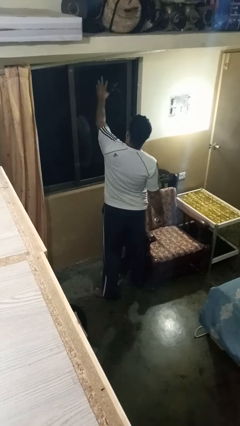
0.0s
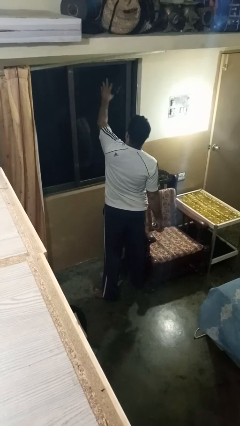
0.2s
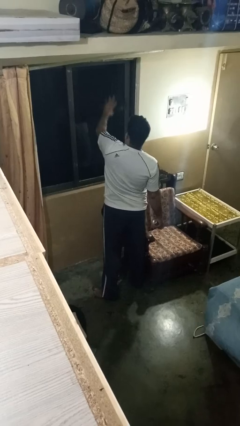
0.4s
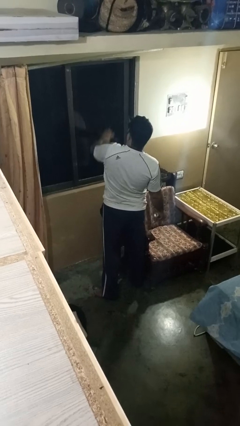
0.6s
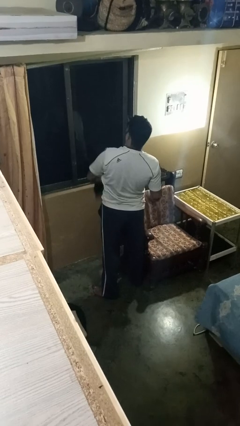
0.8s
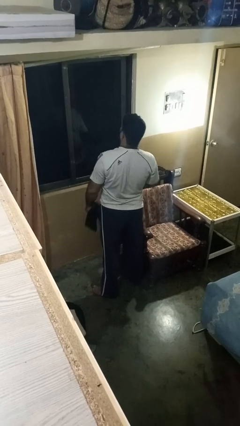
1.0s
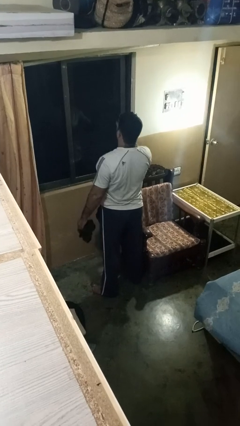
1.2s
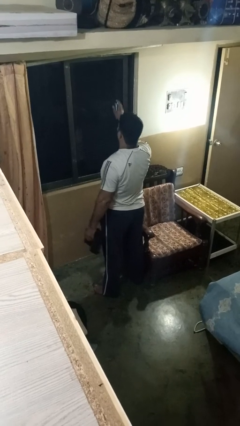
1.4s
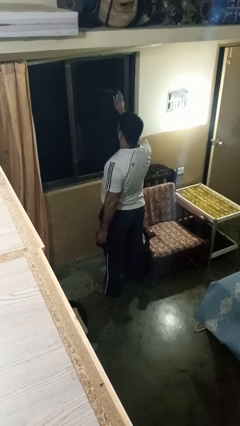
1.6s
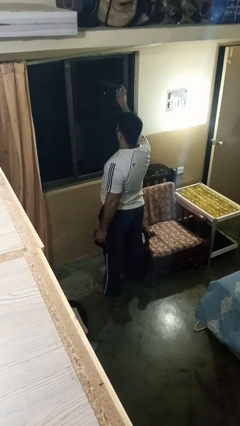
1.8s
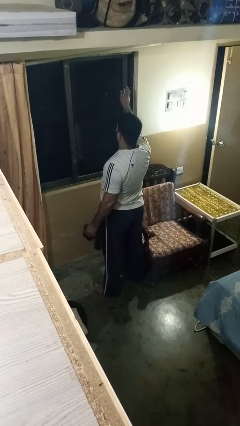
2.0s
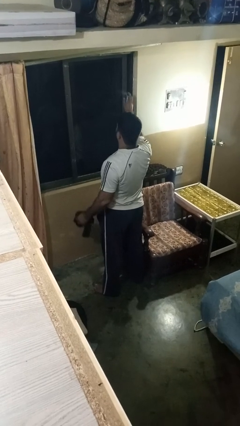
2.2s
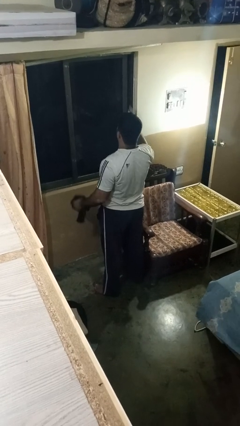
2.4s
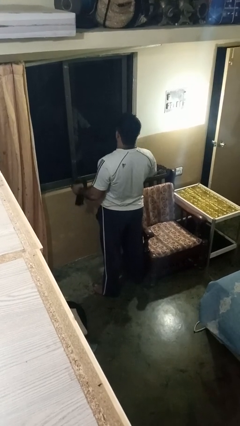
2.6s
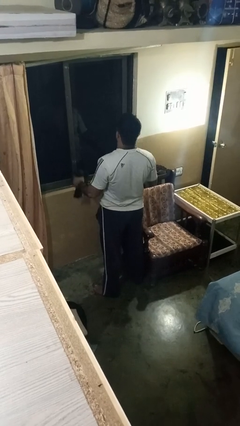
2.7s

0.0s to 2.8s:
person sprays from bottle

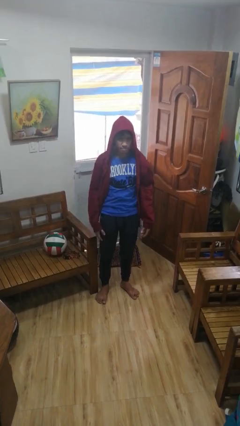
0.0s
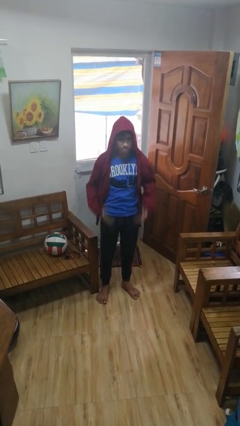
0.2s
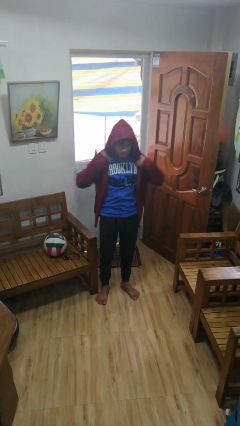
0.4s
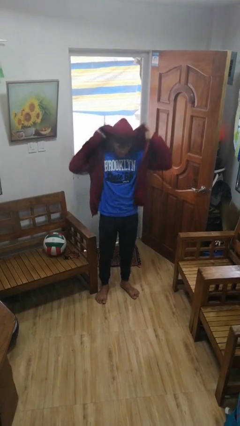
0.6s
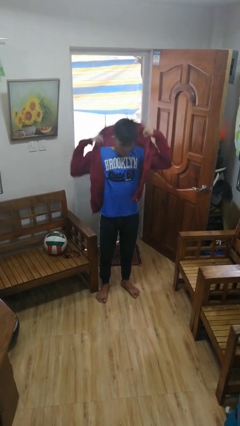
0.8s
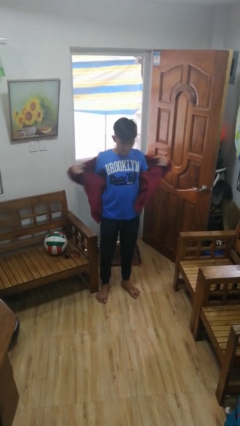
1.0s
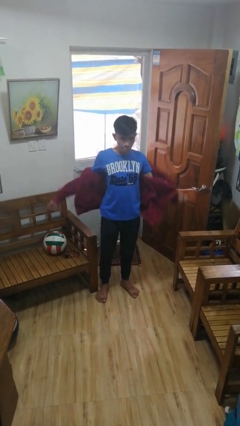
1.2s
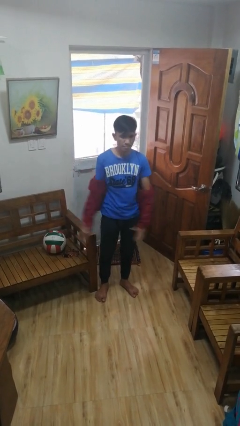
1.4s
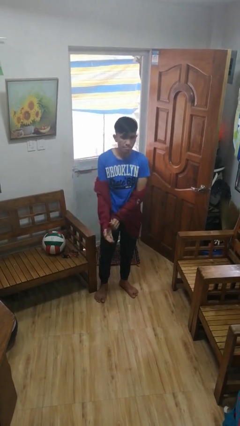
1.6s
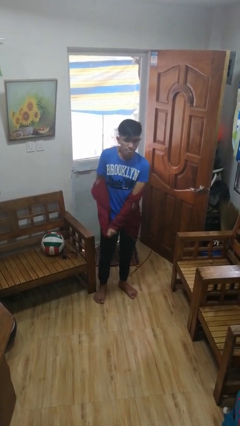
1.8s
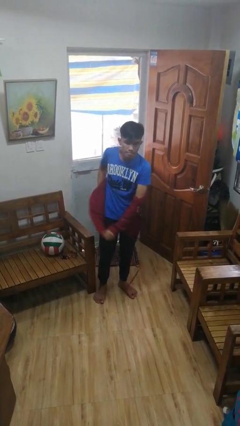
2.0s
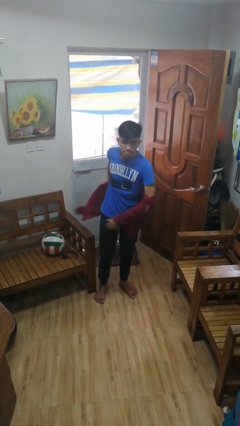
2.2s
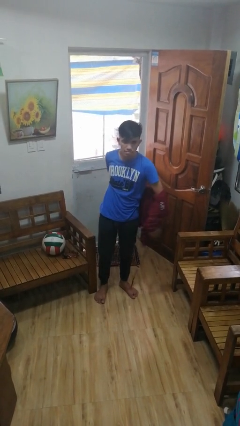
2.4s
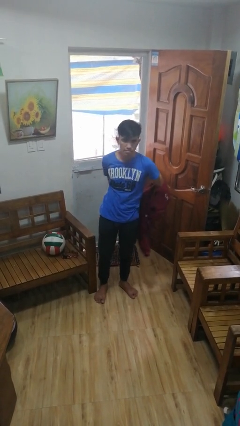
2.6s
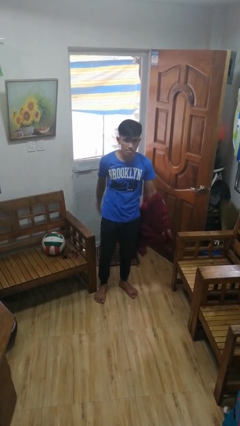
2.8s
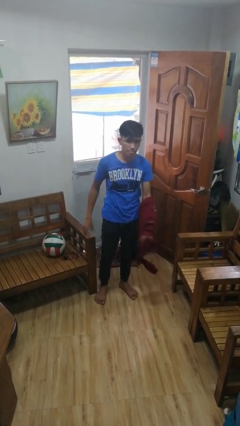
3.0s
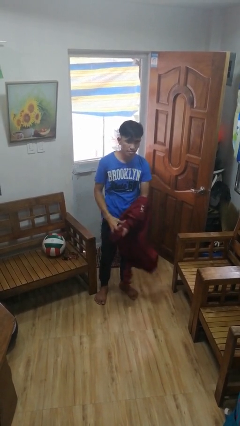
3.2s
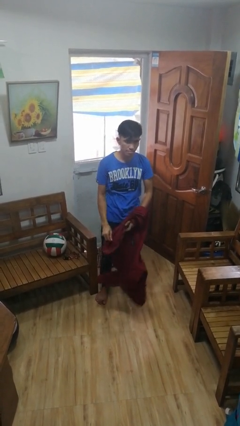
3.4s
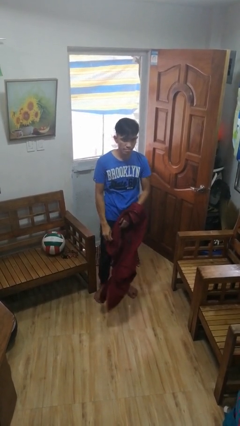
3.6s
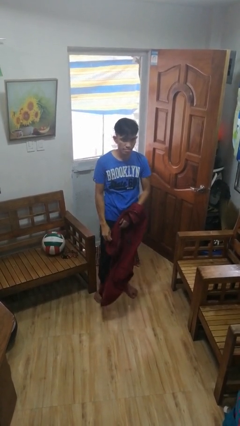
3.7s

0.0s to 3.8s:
person takes off hoodie

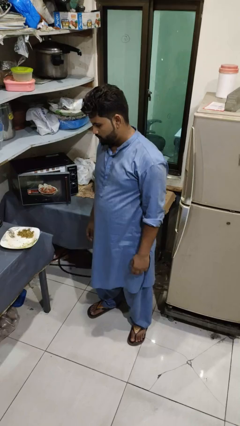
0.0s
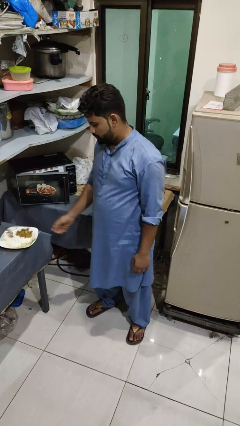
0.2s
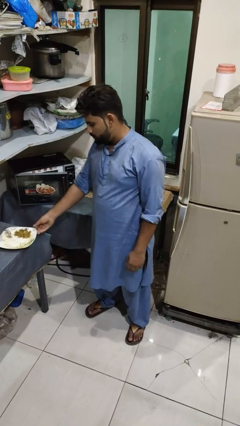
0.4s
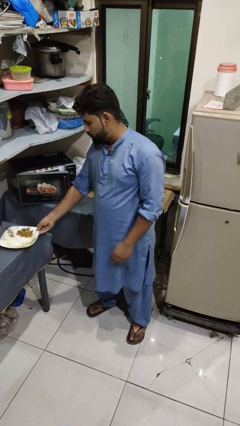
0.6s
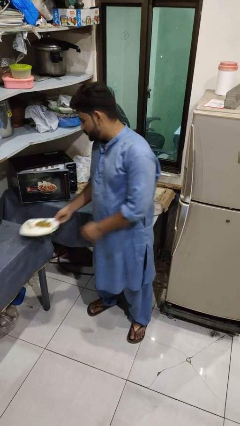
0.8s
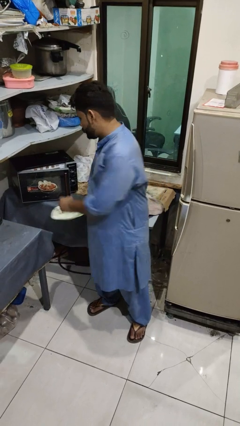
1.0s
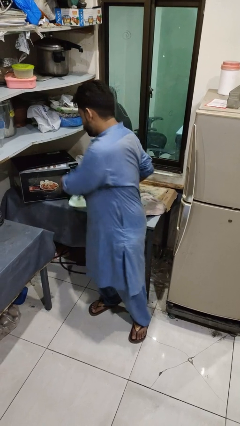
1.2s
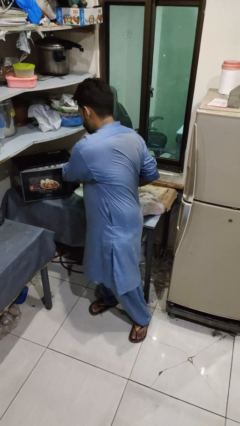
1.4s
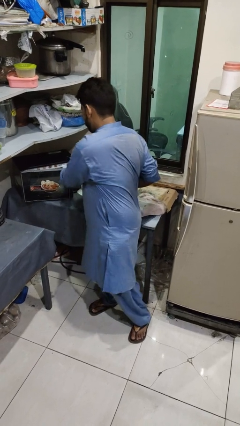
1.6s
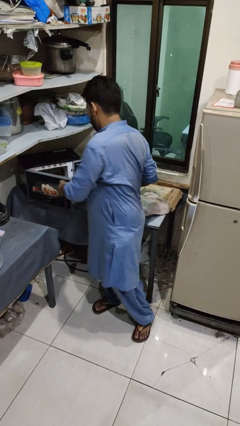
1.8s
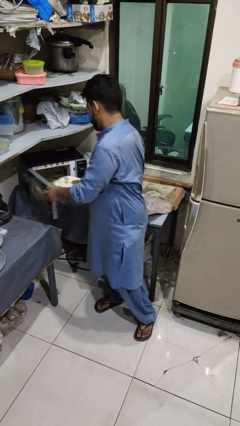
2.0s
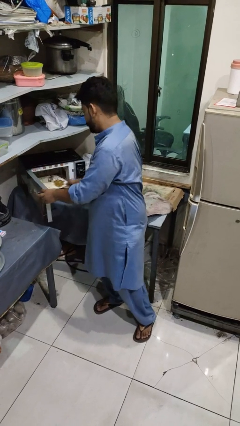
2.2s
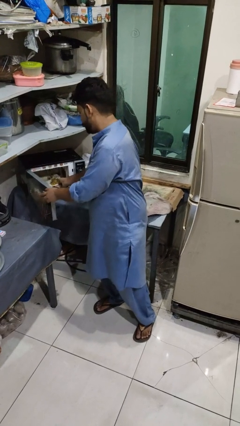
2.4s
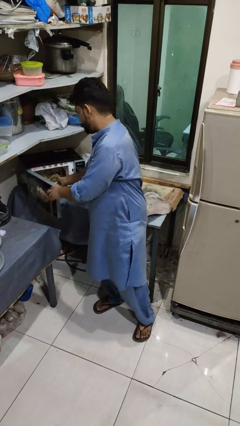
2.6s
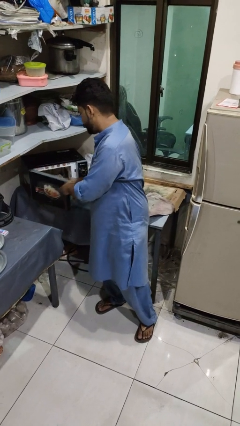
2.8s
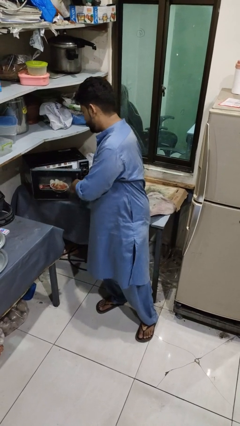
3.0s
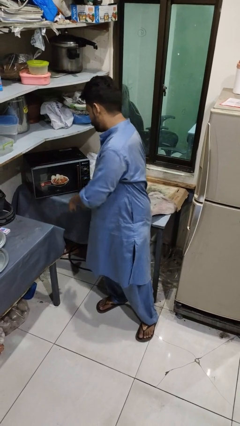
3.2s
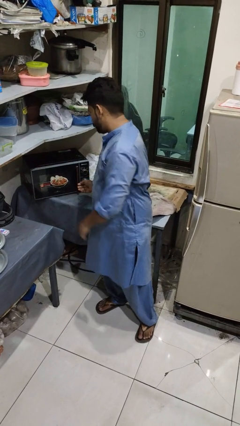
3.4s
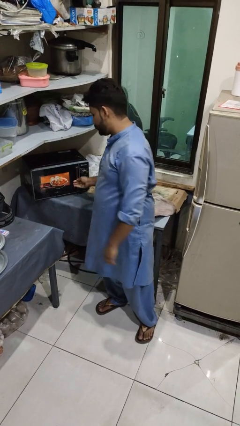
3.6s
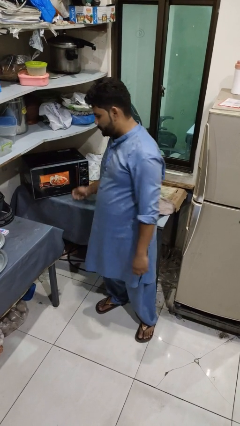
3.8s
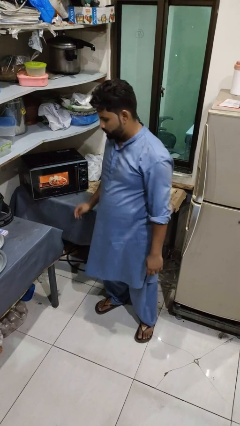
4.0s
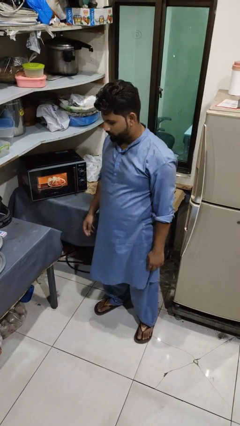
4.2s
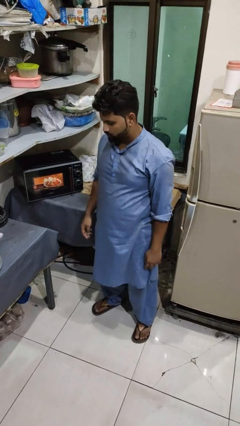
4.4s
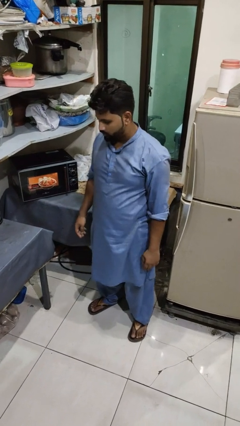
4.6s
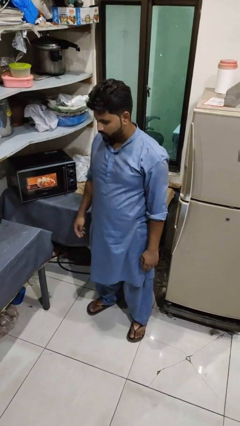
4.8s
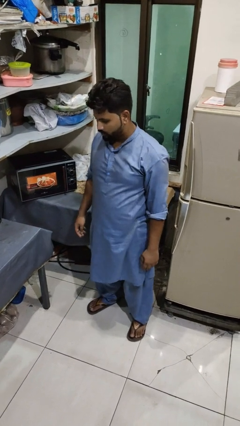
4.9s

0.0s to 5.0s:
person puts object into microwave

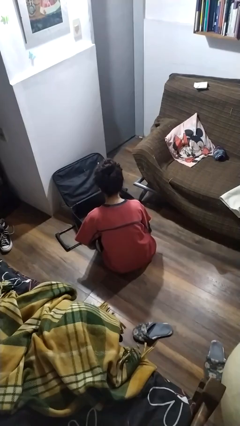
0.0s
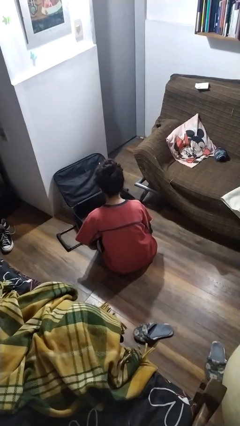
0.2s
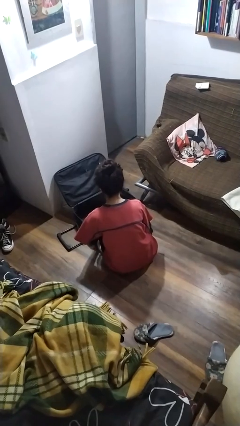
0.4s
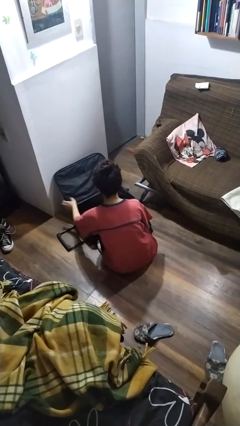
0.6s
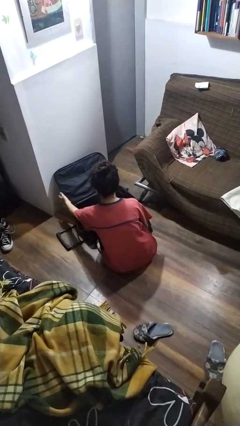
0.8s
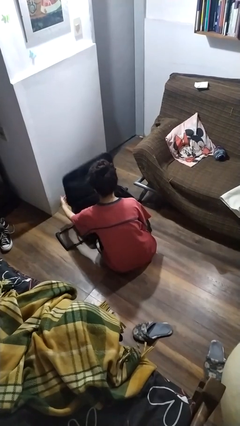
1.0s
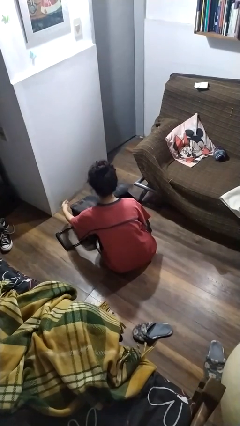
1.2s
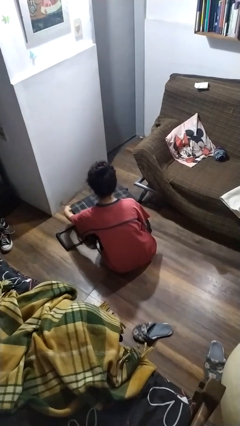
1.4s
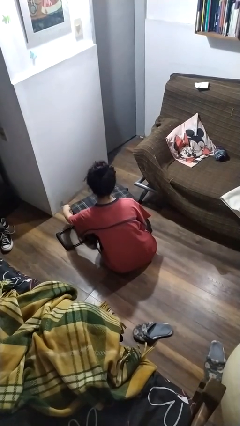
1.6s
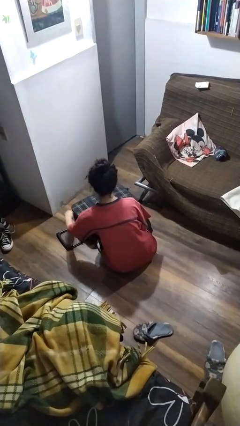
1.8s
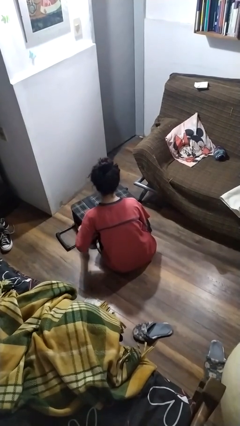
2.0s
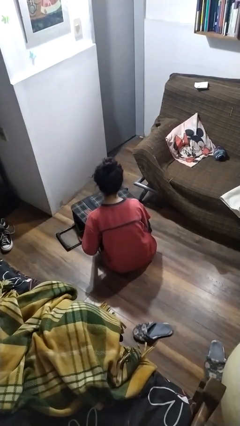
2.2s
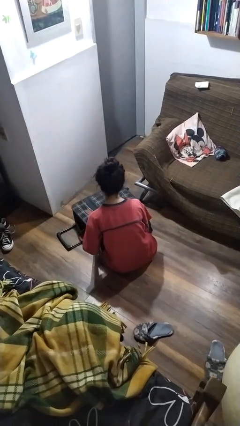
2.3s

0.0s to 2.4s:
person closes suitcase

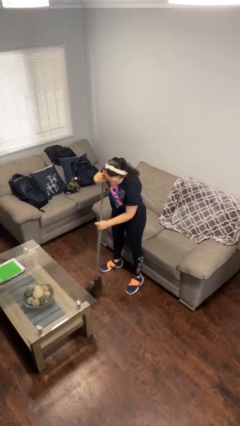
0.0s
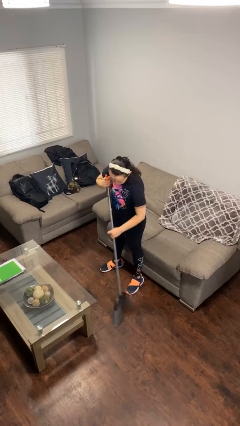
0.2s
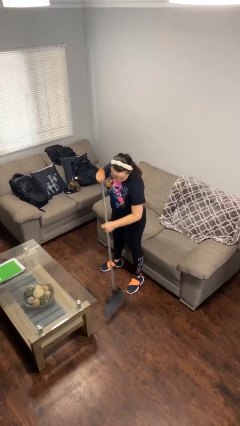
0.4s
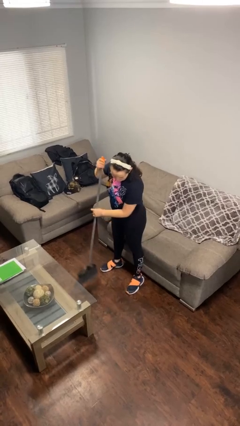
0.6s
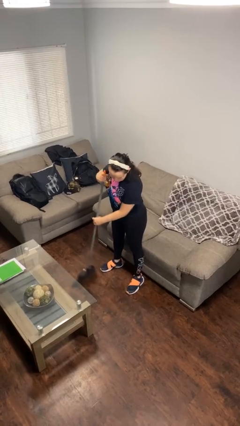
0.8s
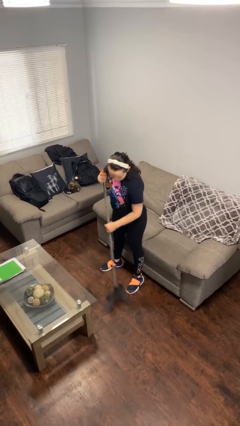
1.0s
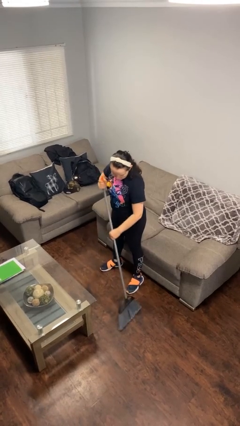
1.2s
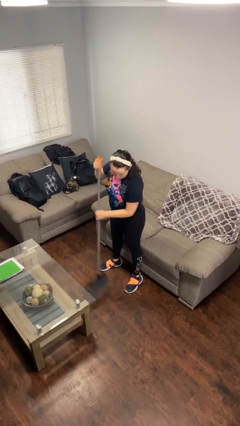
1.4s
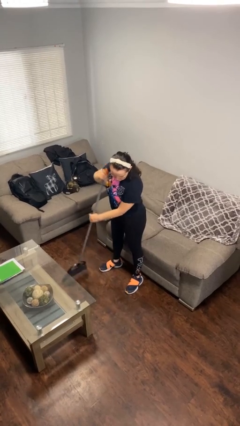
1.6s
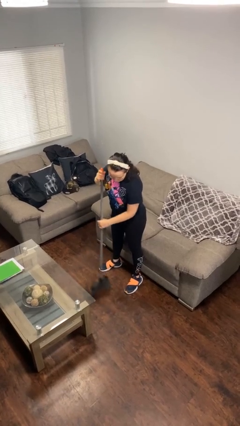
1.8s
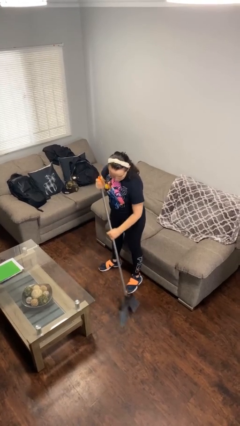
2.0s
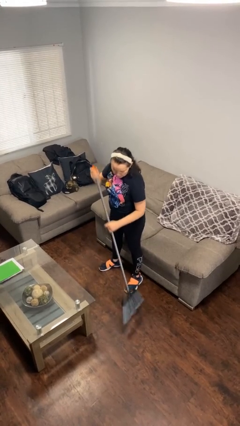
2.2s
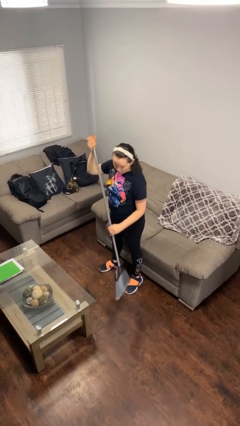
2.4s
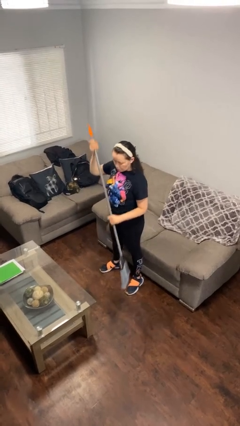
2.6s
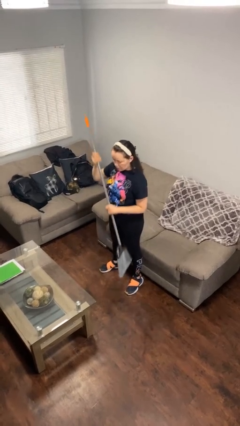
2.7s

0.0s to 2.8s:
person sweeps floor

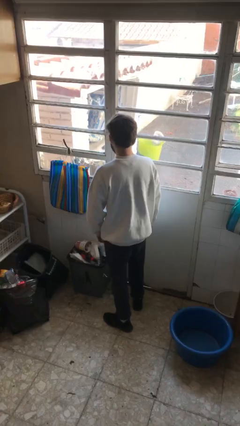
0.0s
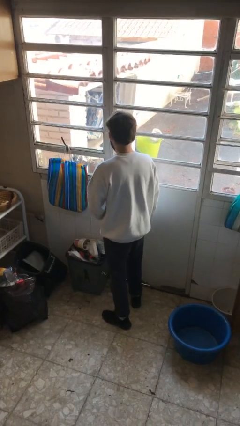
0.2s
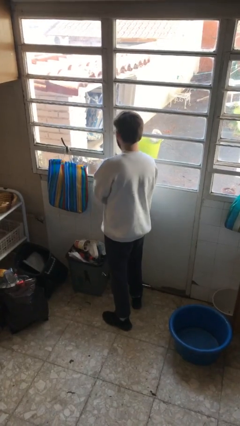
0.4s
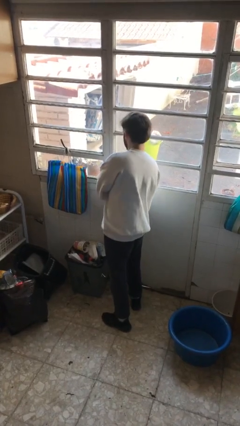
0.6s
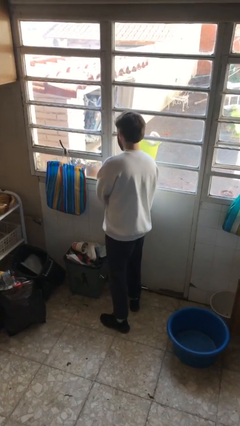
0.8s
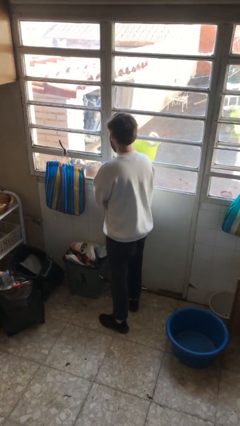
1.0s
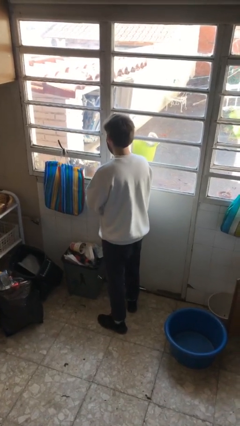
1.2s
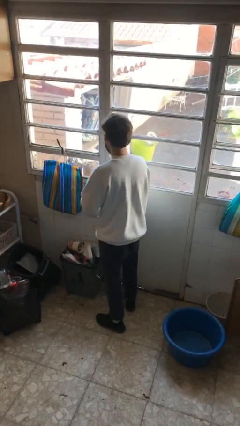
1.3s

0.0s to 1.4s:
person locks door with keys
